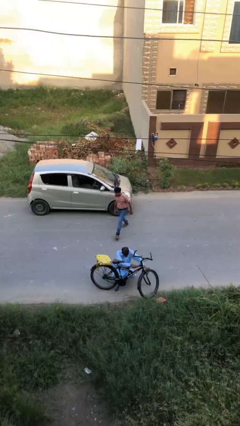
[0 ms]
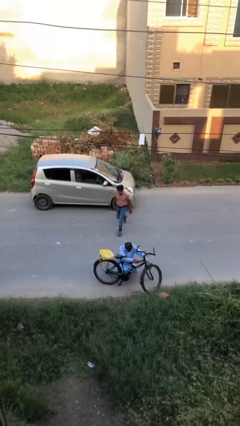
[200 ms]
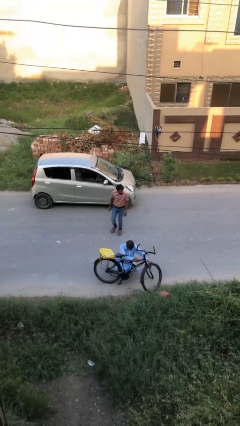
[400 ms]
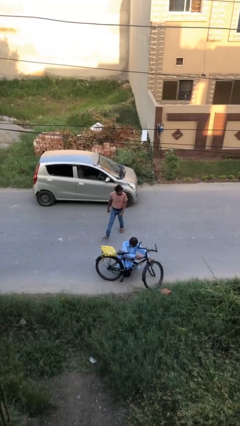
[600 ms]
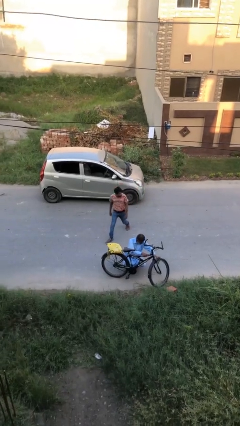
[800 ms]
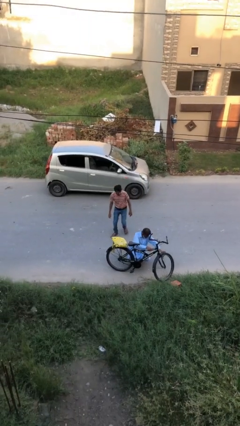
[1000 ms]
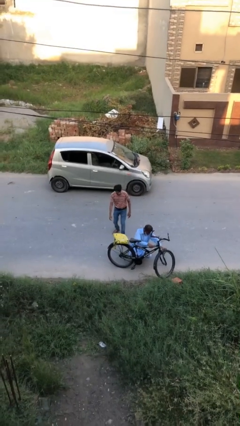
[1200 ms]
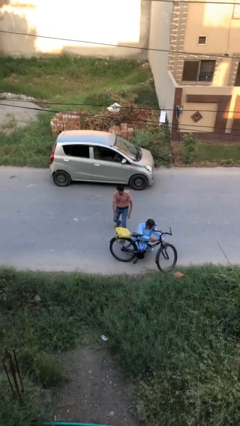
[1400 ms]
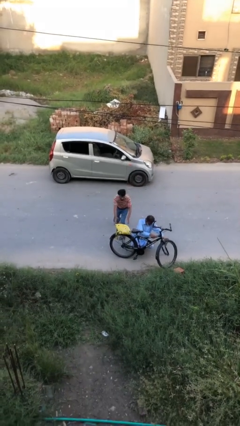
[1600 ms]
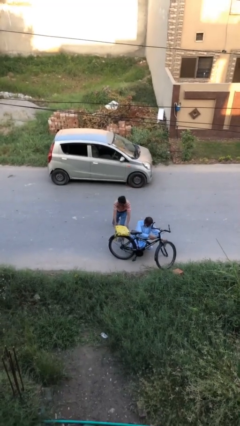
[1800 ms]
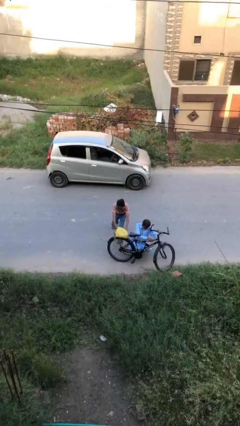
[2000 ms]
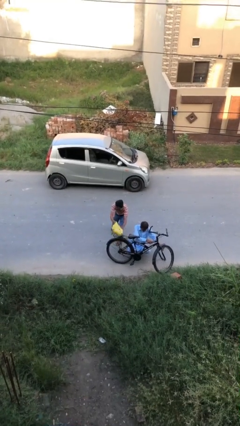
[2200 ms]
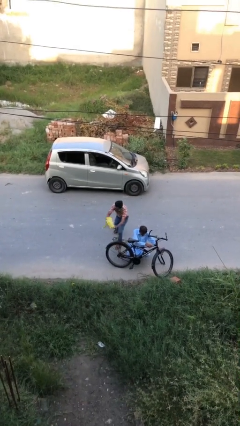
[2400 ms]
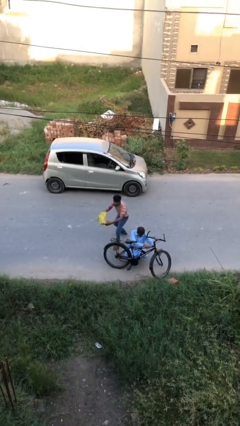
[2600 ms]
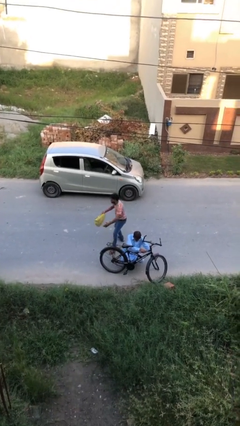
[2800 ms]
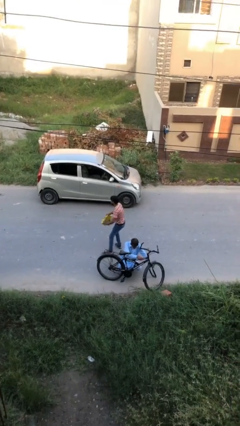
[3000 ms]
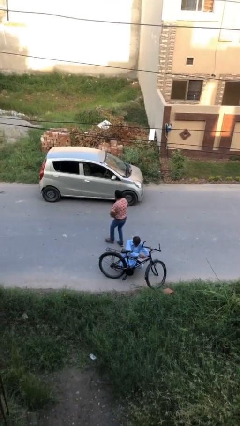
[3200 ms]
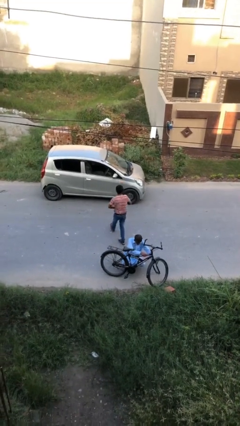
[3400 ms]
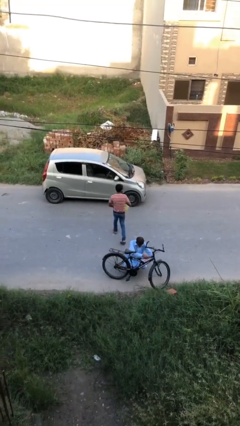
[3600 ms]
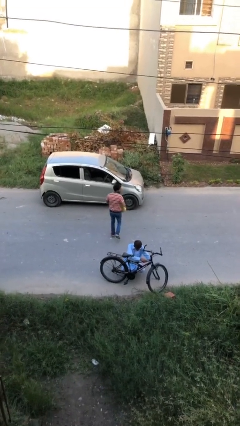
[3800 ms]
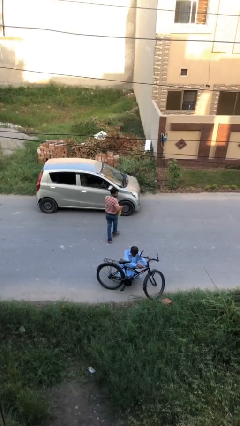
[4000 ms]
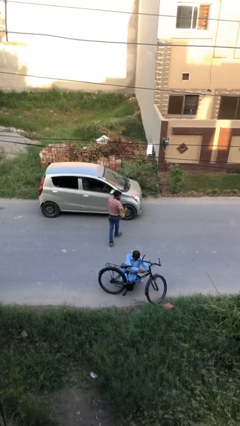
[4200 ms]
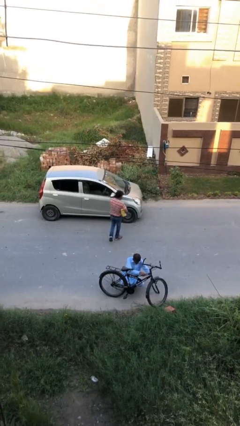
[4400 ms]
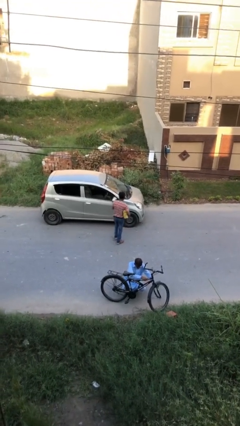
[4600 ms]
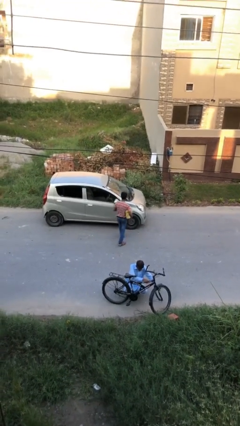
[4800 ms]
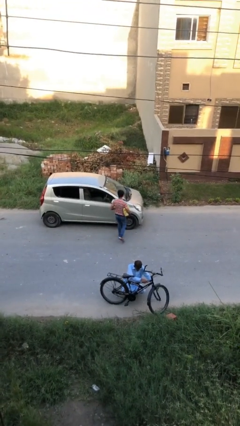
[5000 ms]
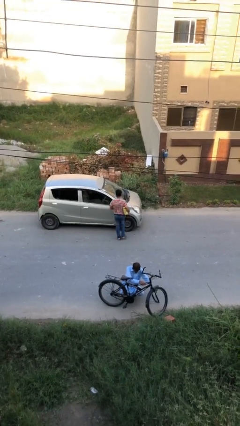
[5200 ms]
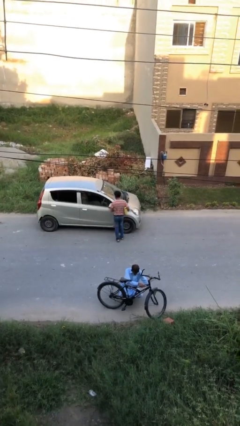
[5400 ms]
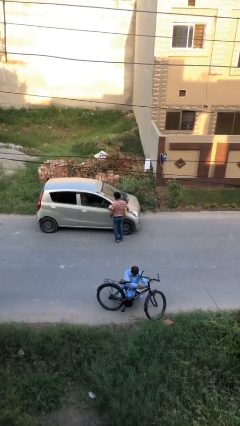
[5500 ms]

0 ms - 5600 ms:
person steals object from person

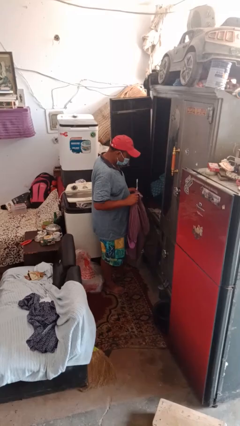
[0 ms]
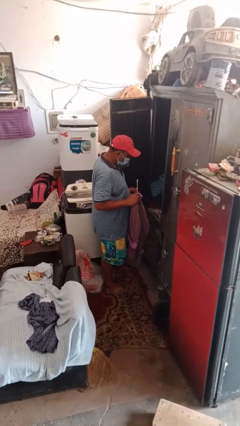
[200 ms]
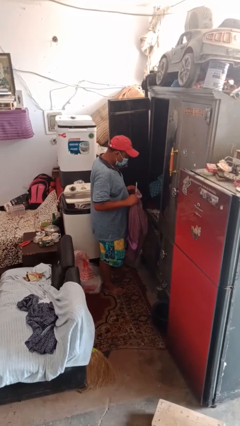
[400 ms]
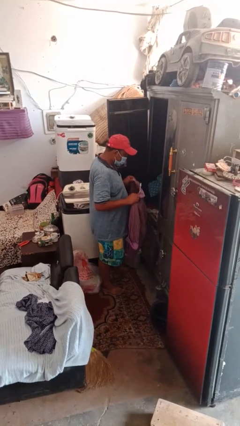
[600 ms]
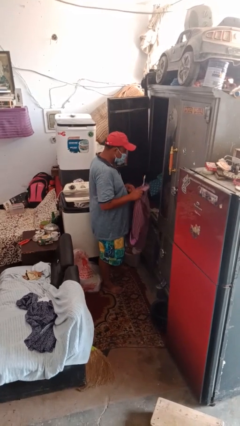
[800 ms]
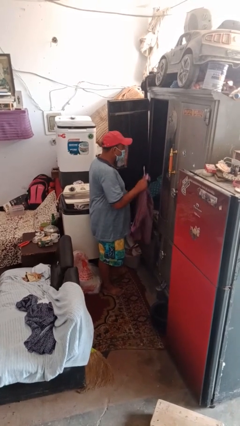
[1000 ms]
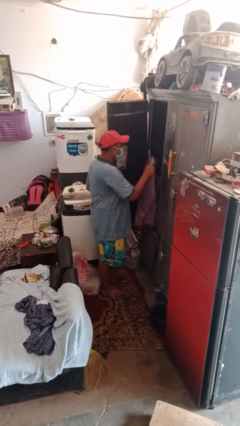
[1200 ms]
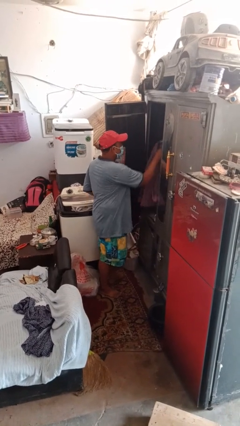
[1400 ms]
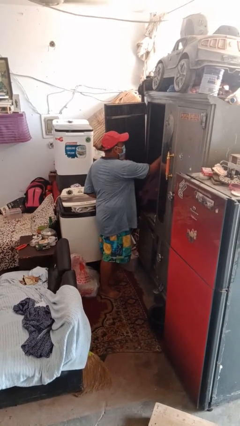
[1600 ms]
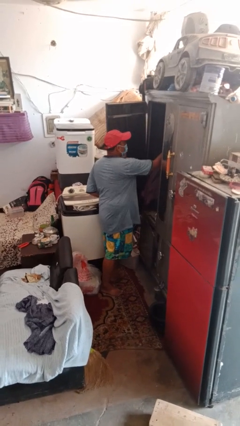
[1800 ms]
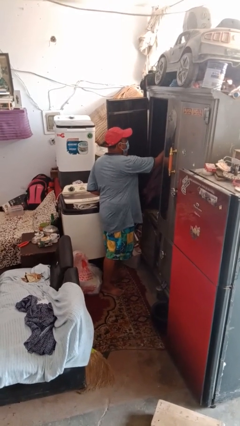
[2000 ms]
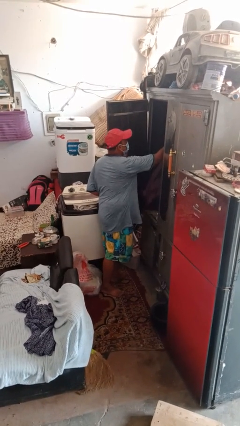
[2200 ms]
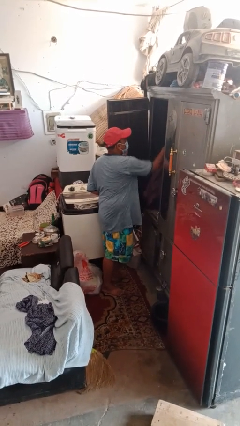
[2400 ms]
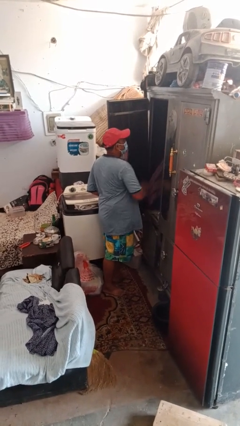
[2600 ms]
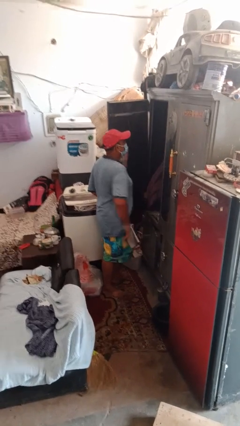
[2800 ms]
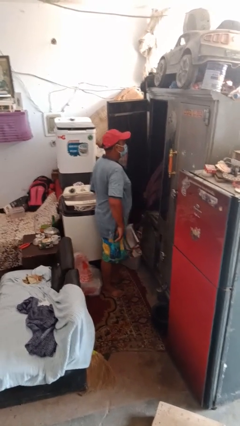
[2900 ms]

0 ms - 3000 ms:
person puts clothes into closet

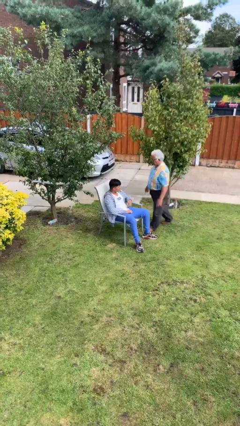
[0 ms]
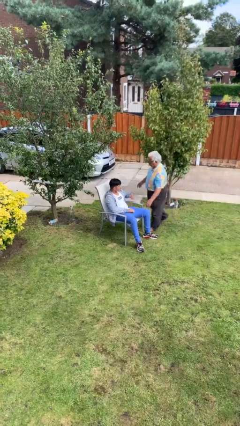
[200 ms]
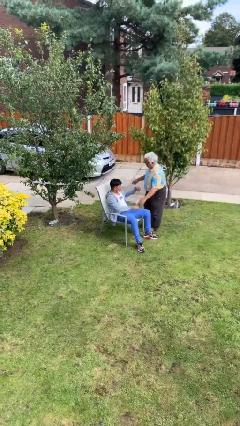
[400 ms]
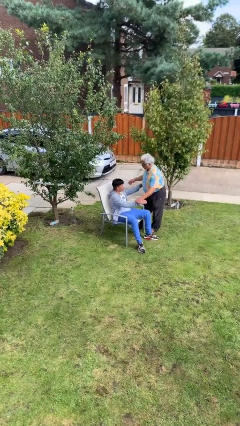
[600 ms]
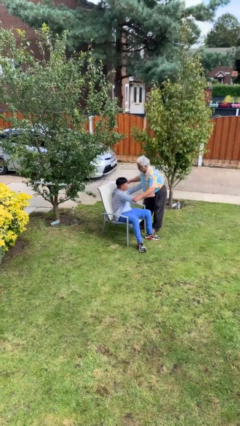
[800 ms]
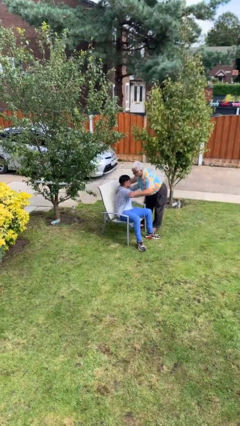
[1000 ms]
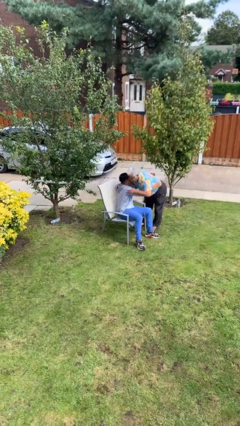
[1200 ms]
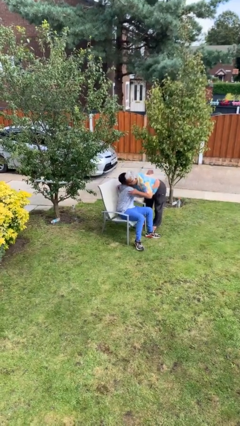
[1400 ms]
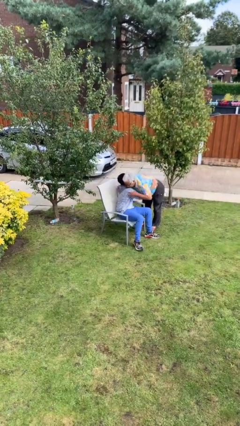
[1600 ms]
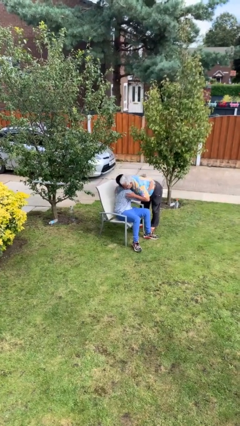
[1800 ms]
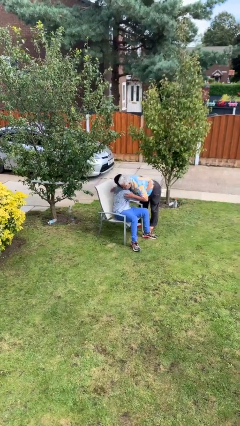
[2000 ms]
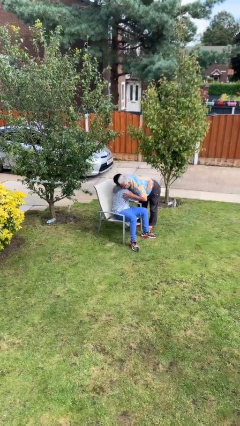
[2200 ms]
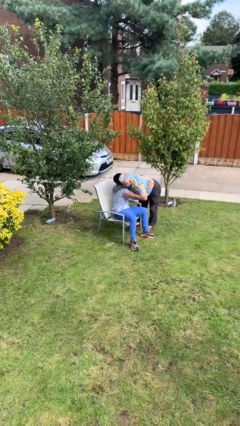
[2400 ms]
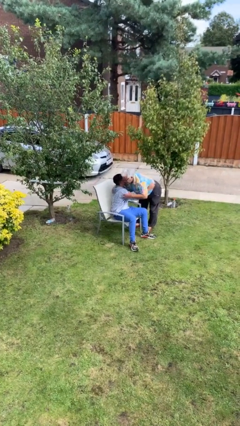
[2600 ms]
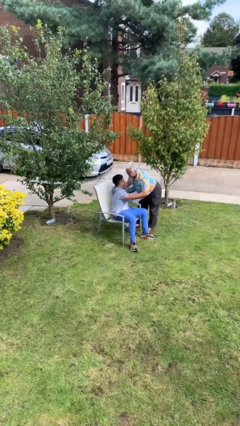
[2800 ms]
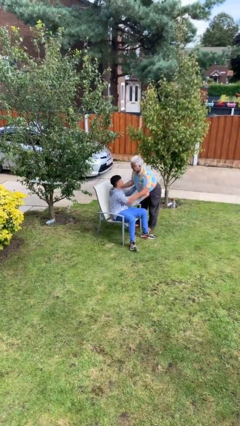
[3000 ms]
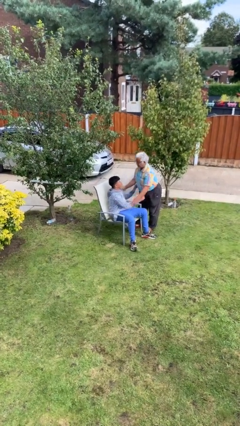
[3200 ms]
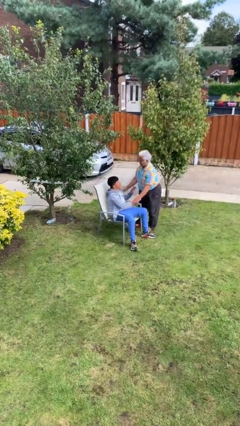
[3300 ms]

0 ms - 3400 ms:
person embraces person

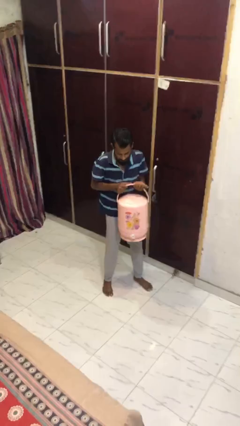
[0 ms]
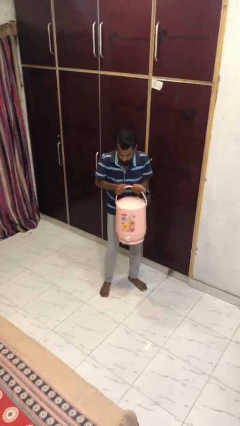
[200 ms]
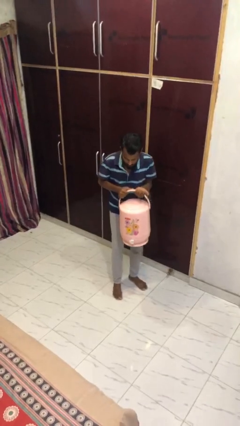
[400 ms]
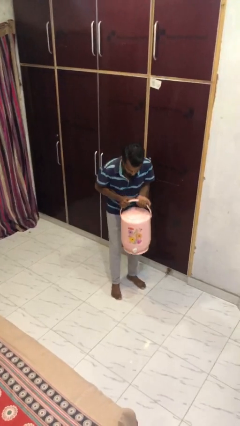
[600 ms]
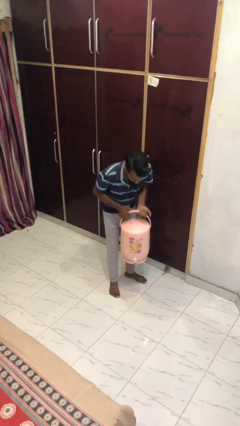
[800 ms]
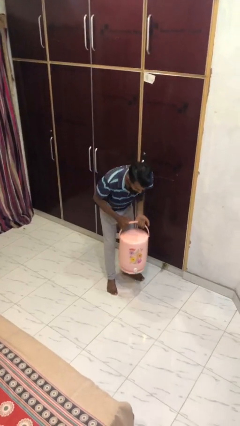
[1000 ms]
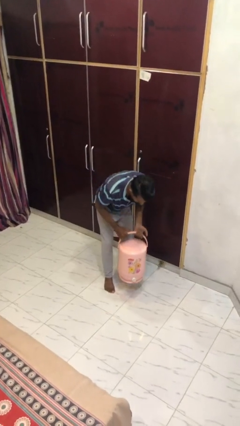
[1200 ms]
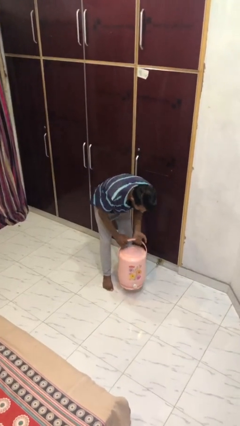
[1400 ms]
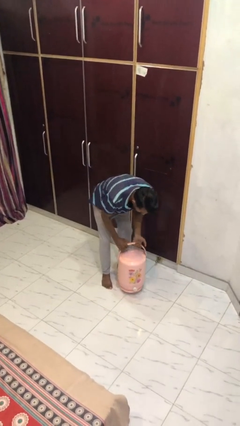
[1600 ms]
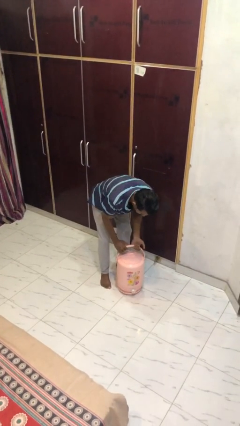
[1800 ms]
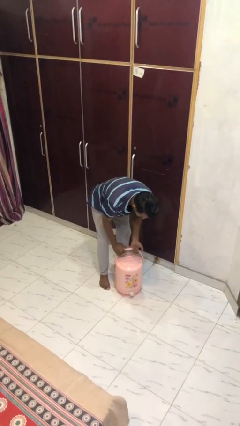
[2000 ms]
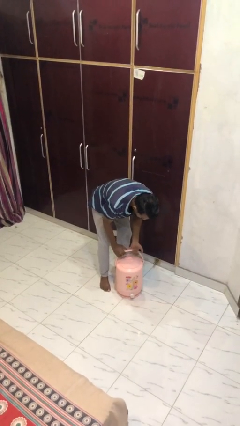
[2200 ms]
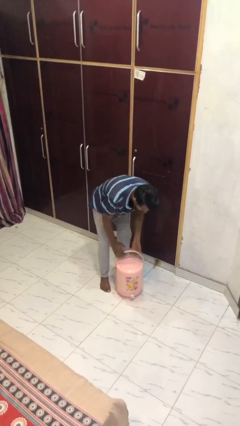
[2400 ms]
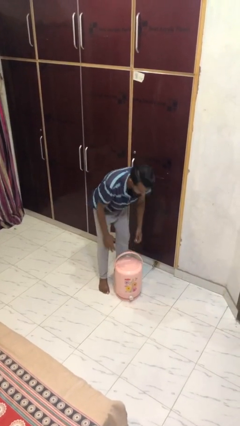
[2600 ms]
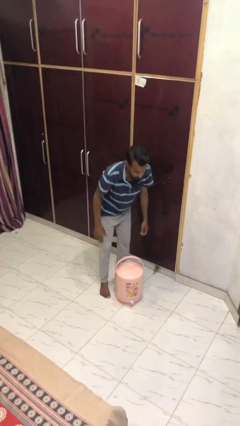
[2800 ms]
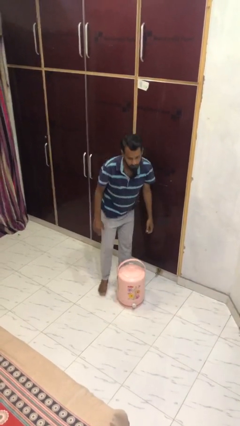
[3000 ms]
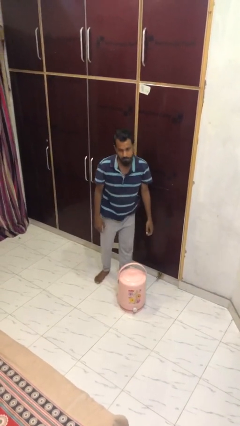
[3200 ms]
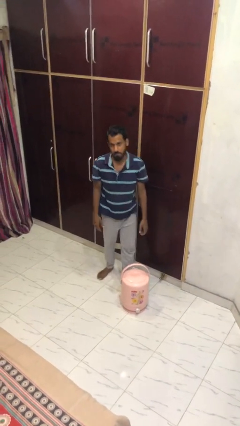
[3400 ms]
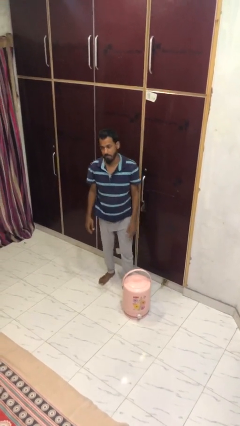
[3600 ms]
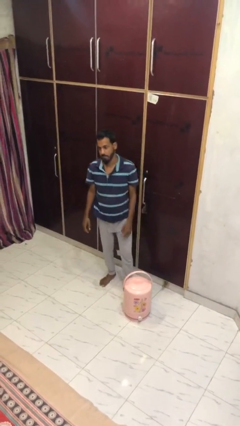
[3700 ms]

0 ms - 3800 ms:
person puts down object on floor

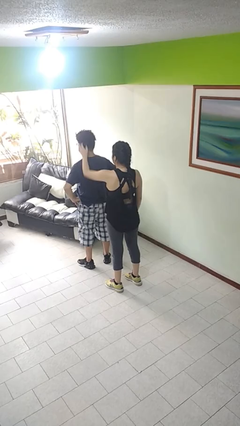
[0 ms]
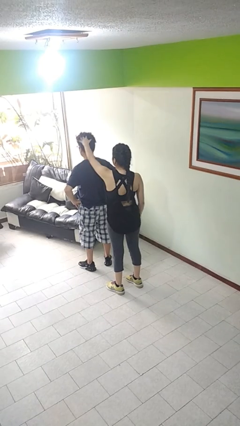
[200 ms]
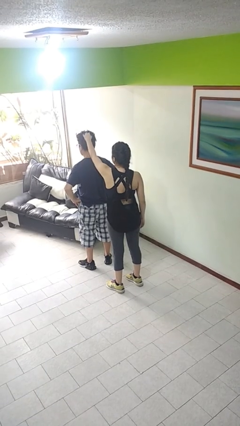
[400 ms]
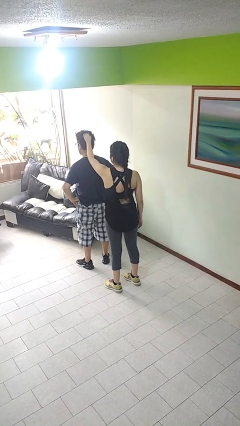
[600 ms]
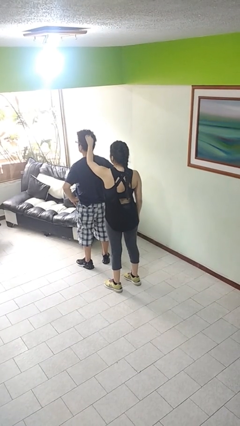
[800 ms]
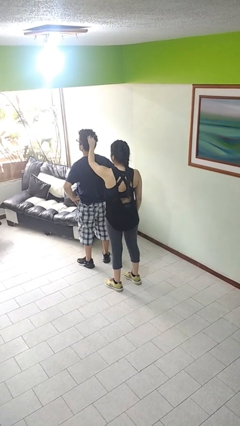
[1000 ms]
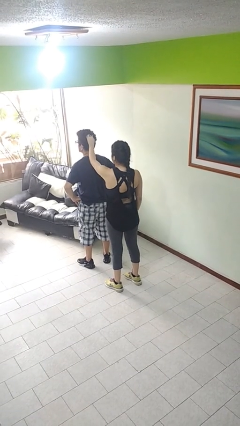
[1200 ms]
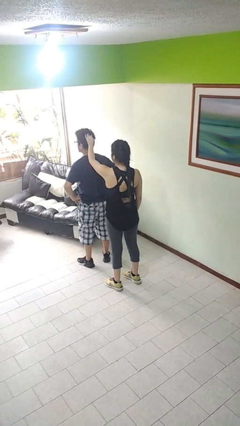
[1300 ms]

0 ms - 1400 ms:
person grabs person by hair

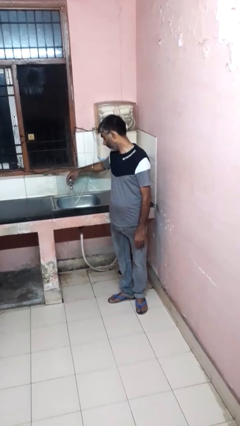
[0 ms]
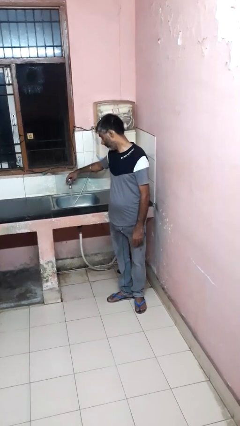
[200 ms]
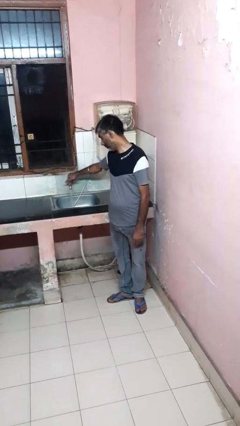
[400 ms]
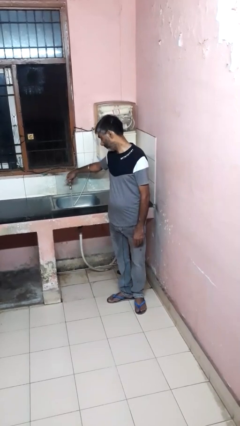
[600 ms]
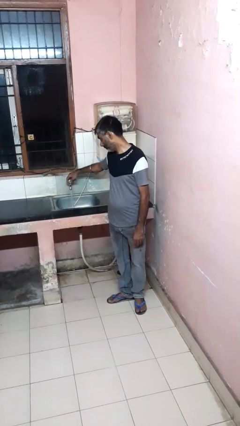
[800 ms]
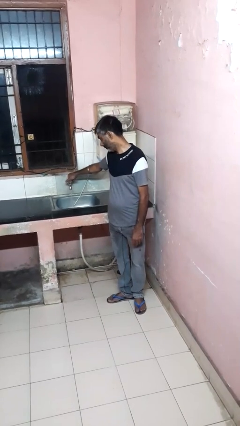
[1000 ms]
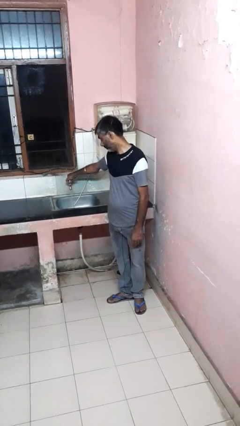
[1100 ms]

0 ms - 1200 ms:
person turns off faucet
